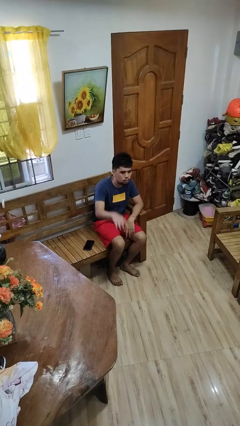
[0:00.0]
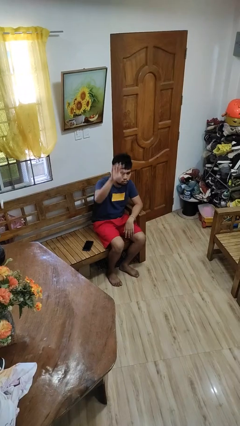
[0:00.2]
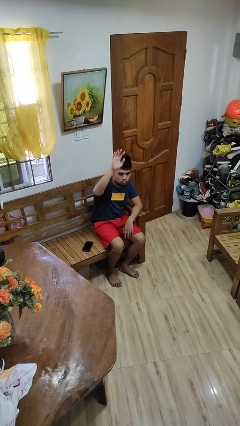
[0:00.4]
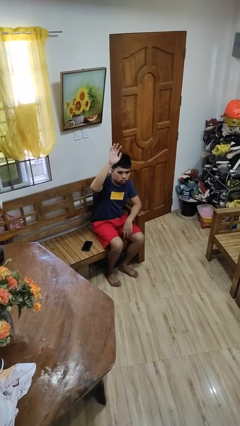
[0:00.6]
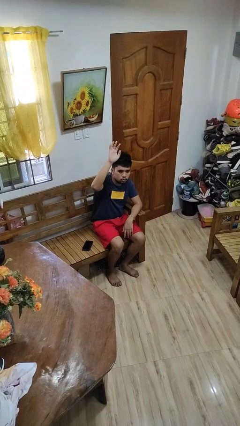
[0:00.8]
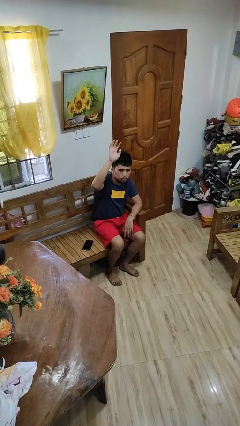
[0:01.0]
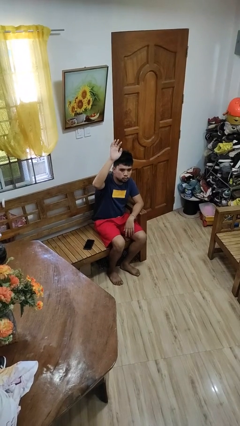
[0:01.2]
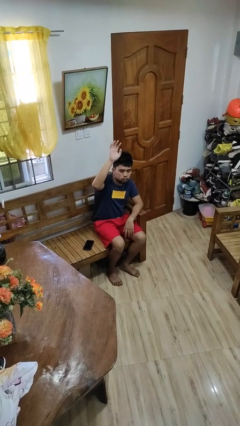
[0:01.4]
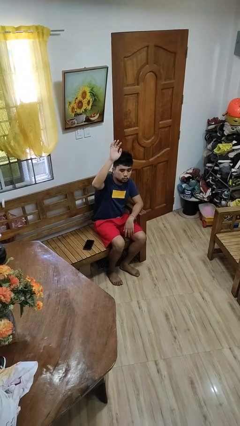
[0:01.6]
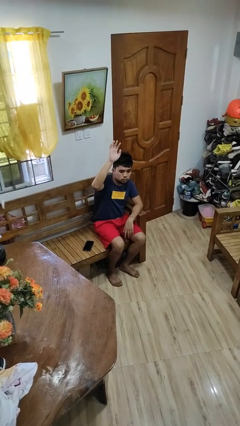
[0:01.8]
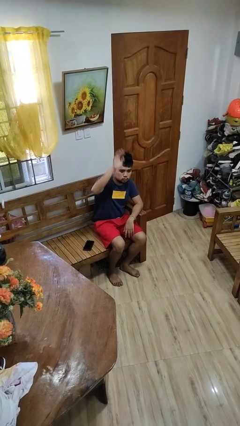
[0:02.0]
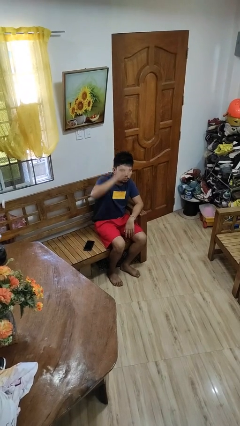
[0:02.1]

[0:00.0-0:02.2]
person gestures raise hand

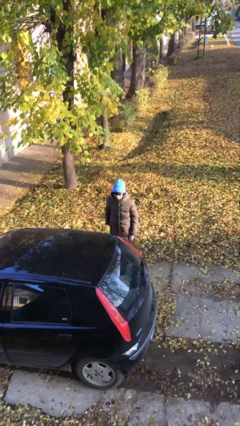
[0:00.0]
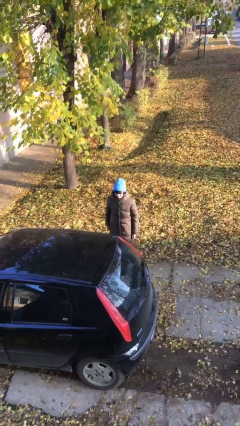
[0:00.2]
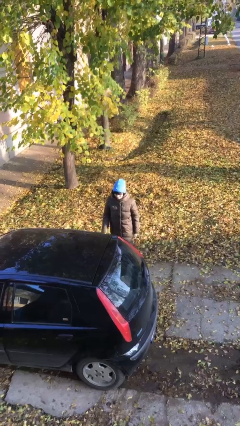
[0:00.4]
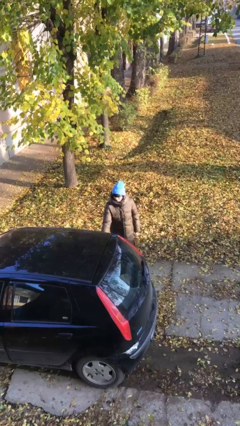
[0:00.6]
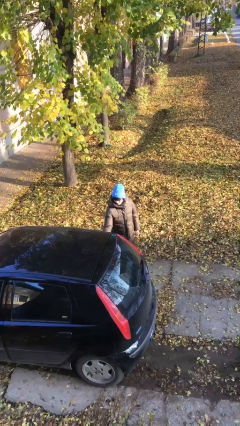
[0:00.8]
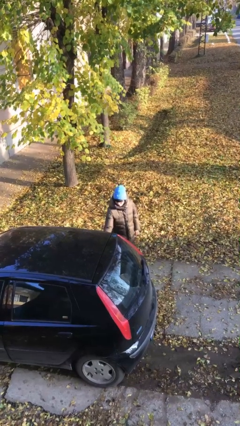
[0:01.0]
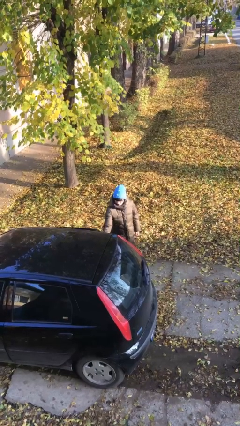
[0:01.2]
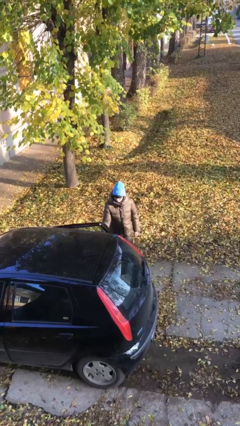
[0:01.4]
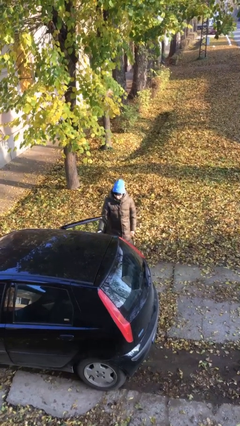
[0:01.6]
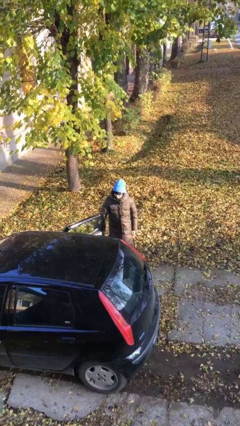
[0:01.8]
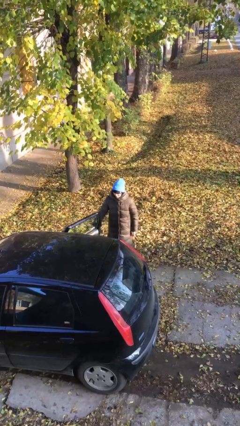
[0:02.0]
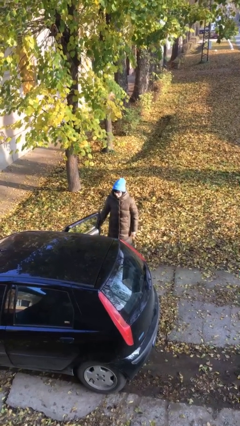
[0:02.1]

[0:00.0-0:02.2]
person opens car door

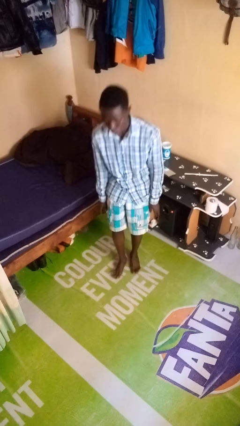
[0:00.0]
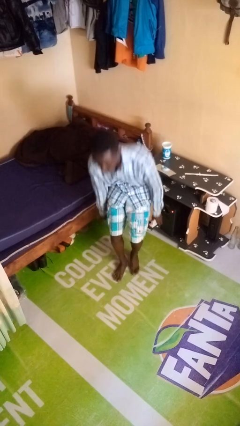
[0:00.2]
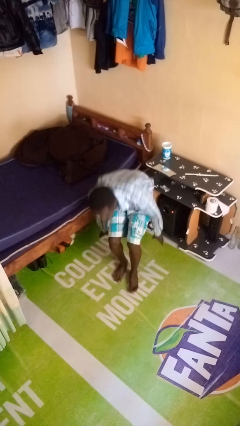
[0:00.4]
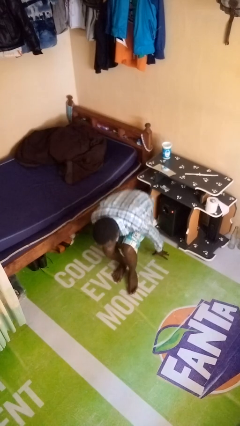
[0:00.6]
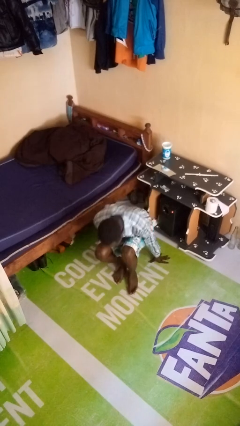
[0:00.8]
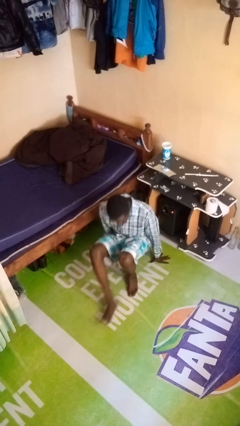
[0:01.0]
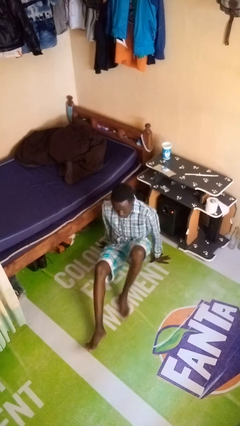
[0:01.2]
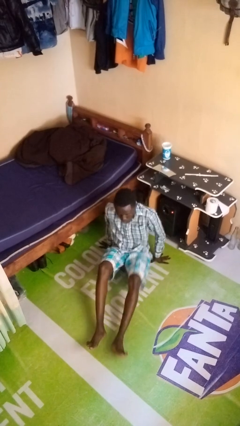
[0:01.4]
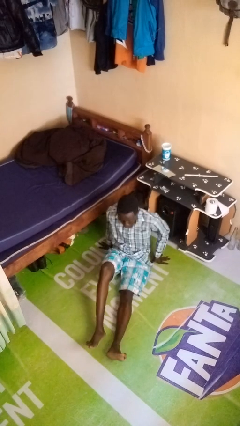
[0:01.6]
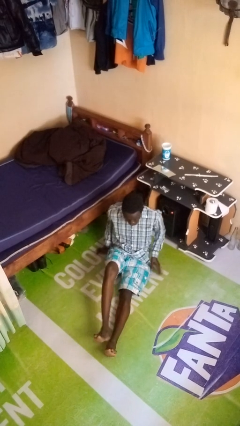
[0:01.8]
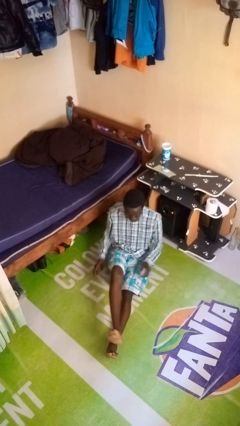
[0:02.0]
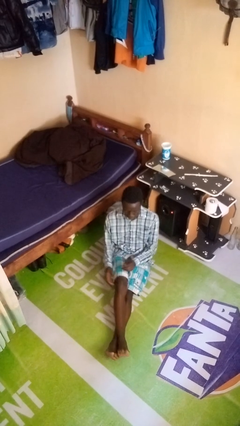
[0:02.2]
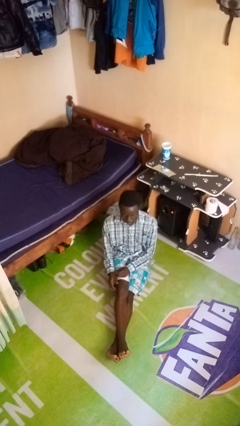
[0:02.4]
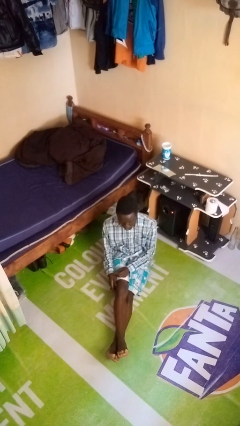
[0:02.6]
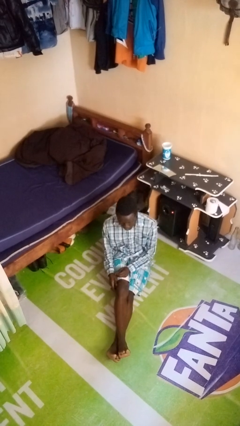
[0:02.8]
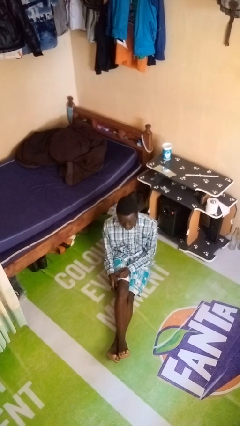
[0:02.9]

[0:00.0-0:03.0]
person sits crisscross

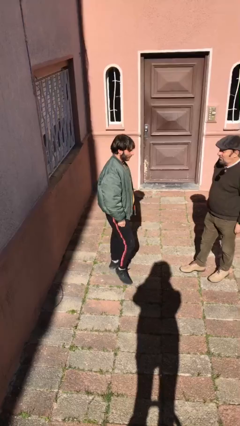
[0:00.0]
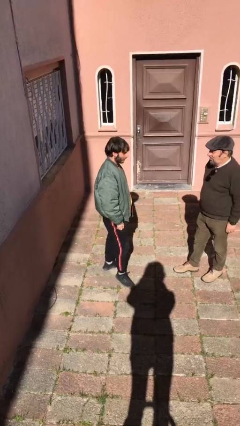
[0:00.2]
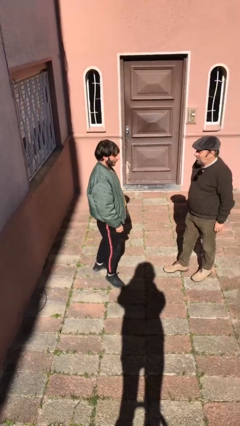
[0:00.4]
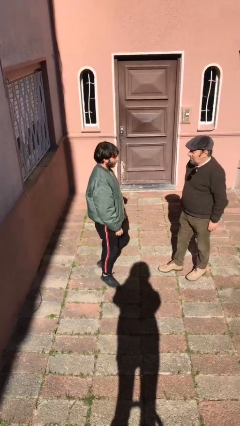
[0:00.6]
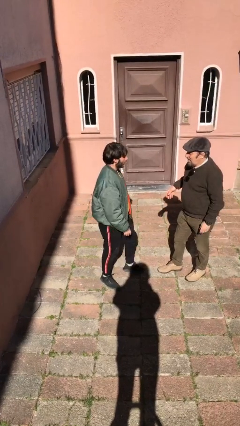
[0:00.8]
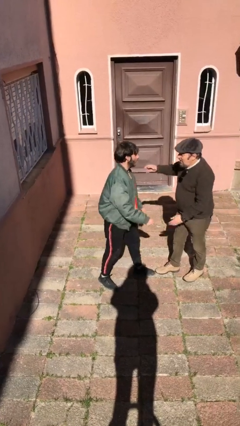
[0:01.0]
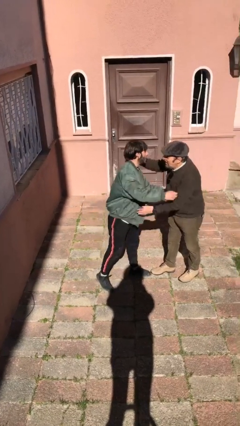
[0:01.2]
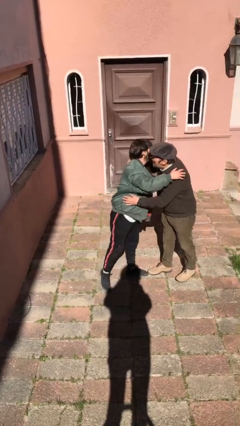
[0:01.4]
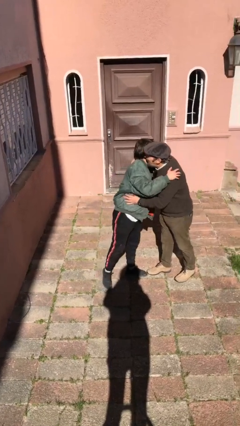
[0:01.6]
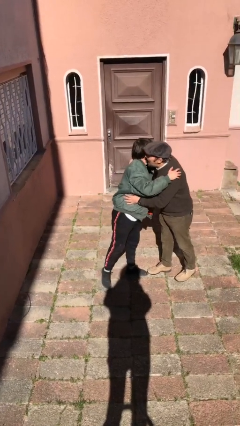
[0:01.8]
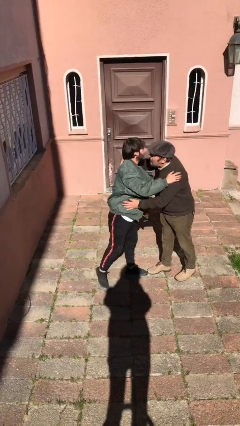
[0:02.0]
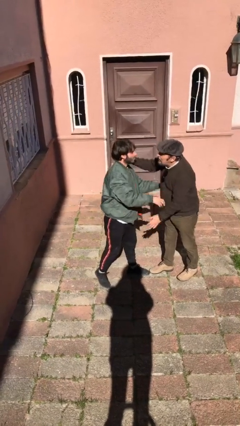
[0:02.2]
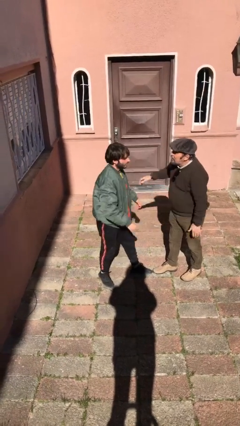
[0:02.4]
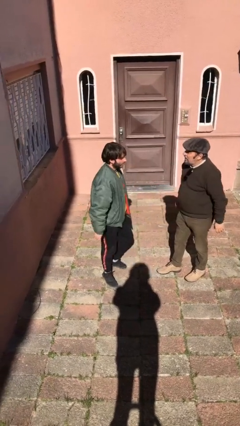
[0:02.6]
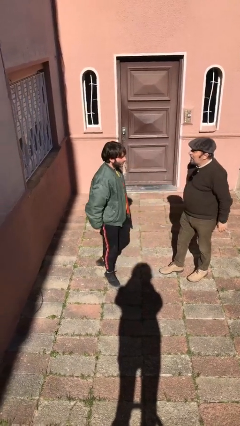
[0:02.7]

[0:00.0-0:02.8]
person kisses cheek of person

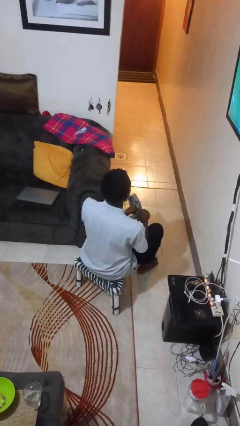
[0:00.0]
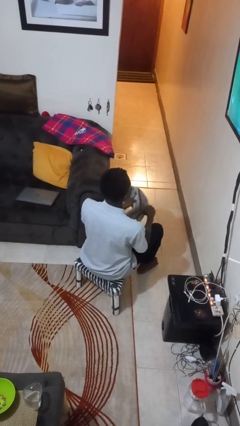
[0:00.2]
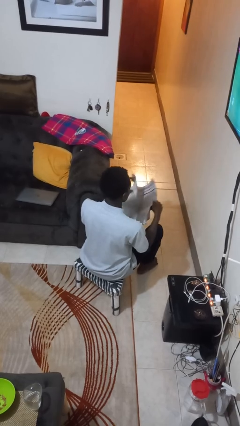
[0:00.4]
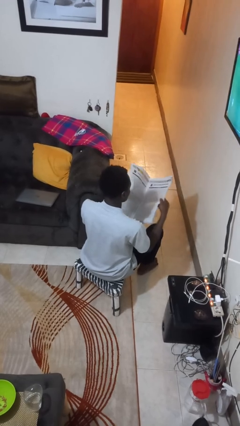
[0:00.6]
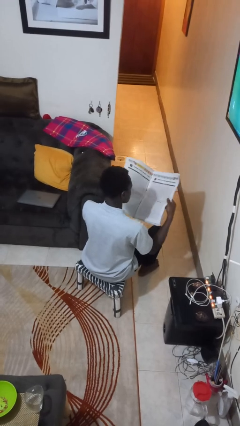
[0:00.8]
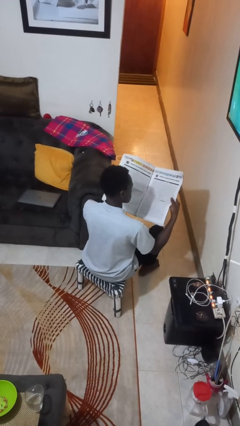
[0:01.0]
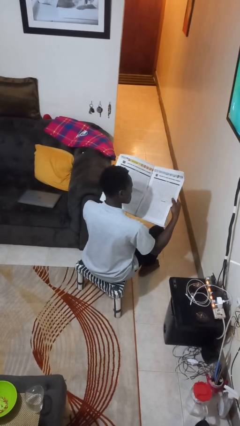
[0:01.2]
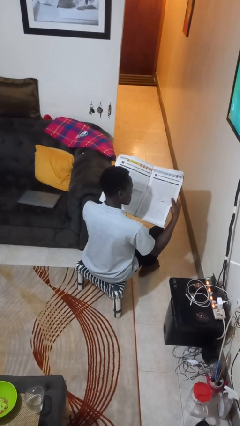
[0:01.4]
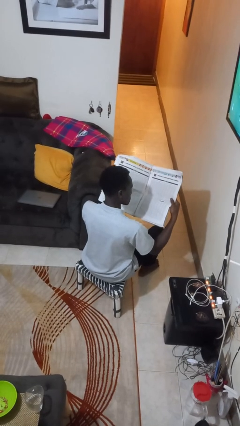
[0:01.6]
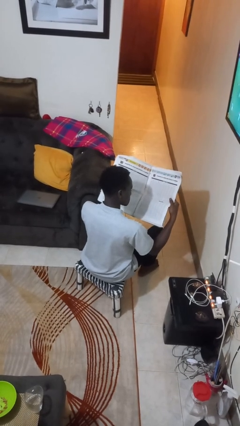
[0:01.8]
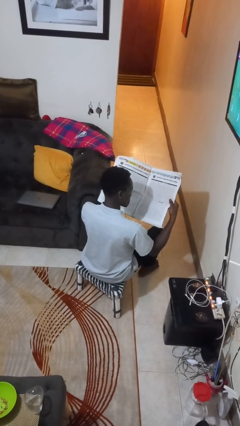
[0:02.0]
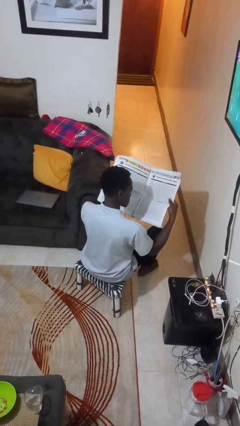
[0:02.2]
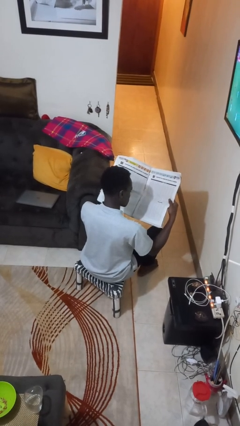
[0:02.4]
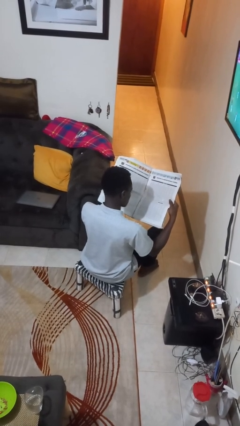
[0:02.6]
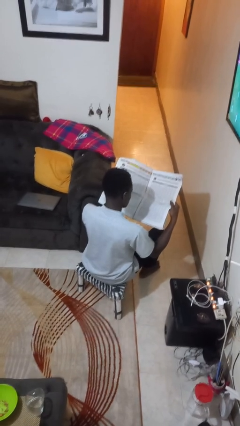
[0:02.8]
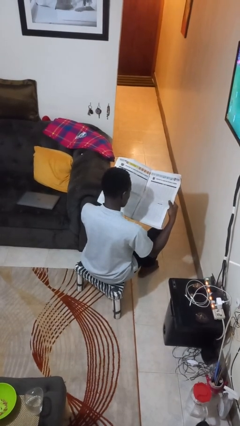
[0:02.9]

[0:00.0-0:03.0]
person reads newspaper

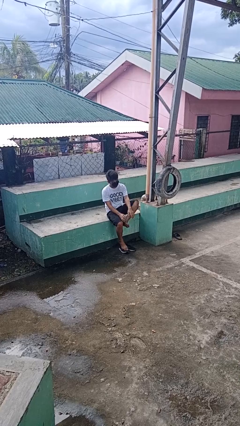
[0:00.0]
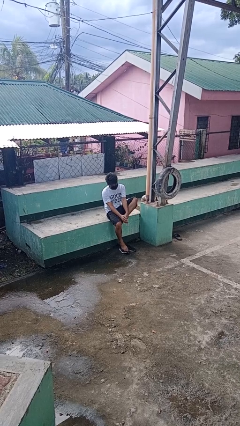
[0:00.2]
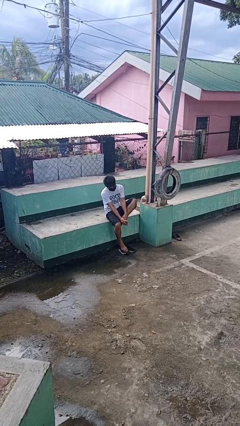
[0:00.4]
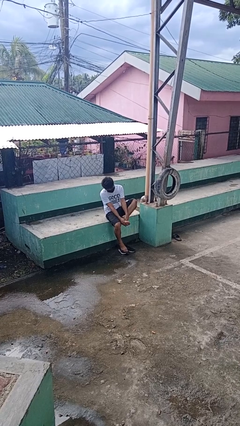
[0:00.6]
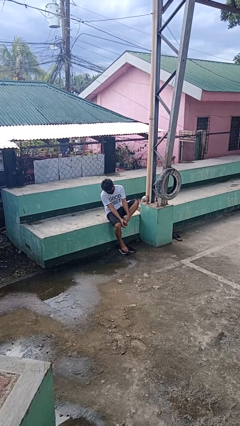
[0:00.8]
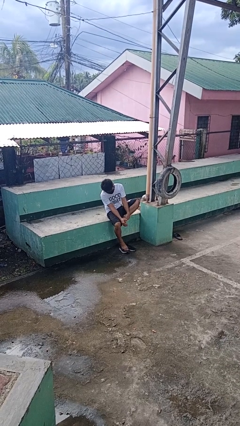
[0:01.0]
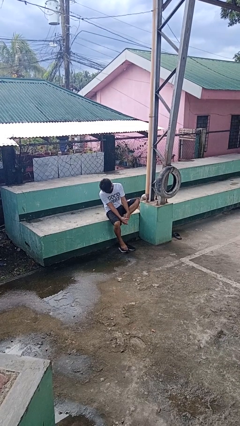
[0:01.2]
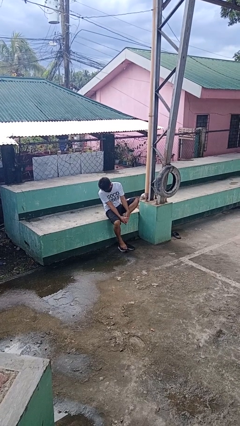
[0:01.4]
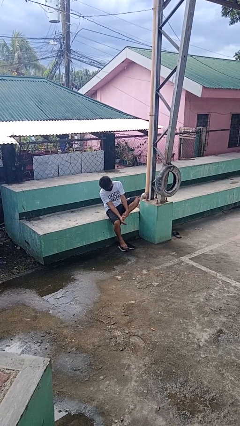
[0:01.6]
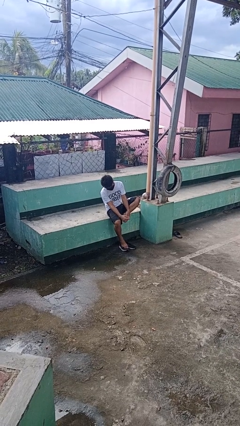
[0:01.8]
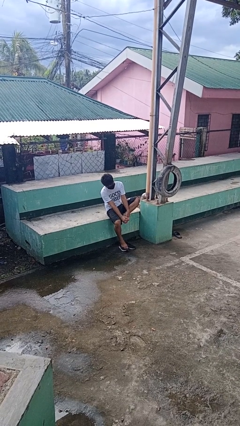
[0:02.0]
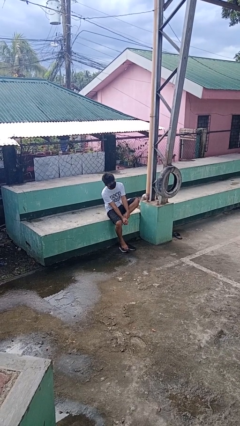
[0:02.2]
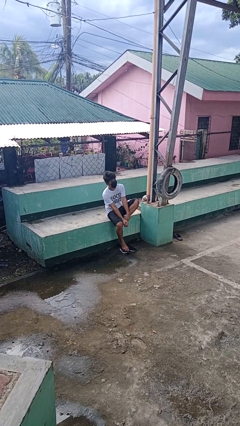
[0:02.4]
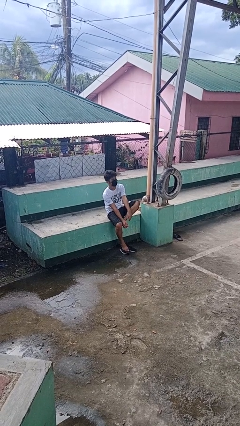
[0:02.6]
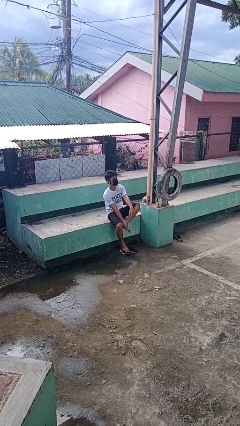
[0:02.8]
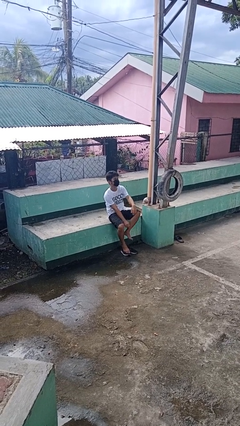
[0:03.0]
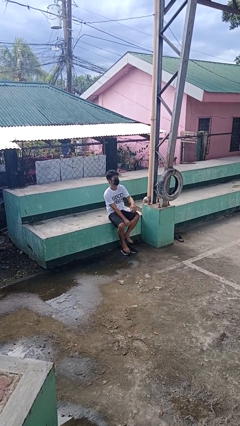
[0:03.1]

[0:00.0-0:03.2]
person rubs foot

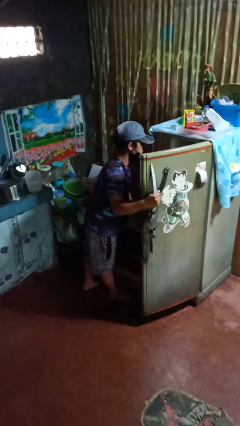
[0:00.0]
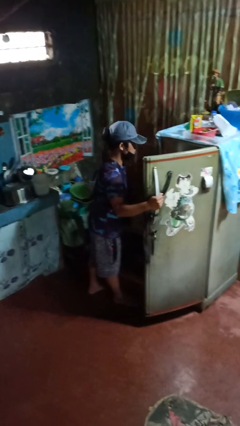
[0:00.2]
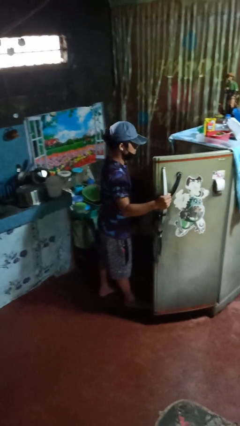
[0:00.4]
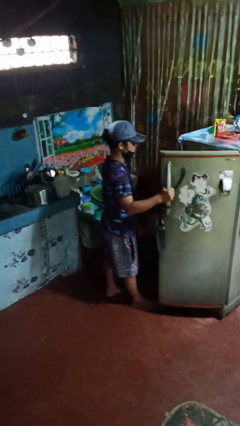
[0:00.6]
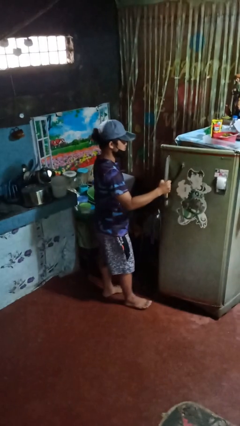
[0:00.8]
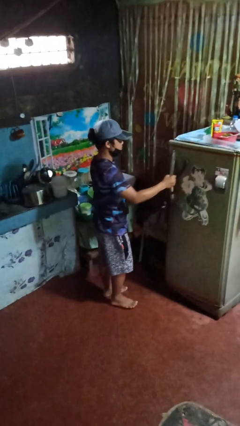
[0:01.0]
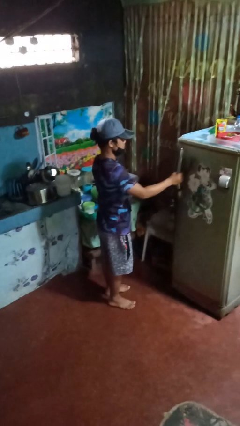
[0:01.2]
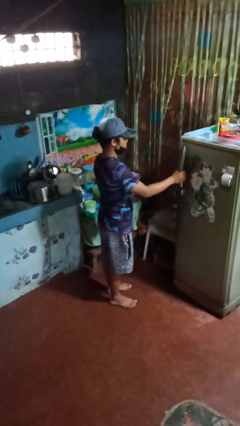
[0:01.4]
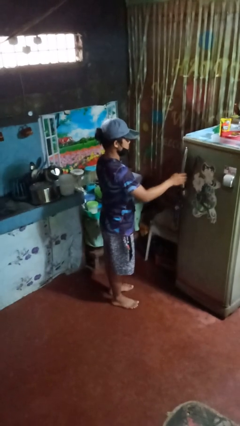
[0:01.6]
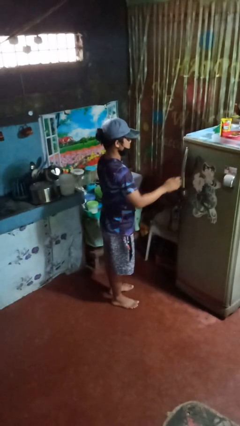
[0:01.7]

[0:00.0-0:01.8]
person closes refrigerator
